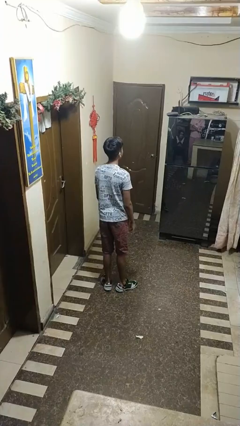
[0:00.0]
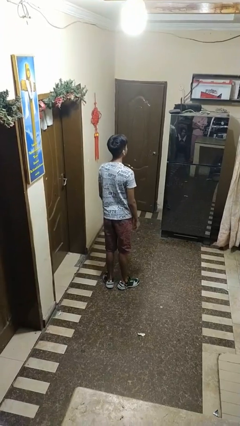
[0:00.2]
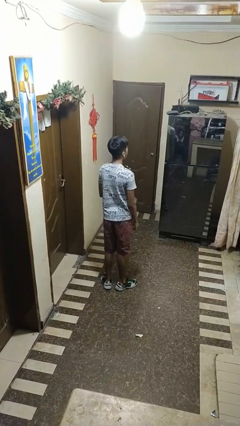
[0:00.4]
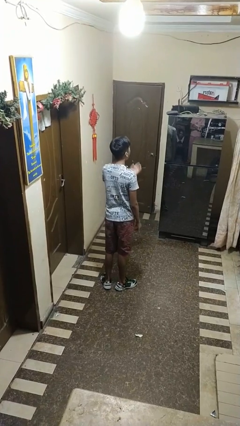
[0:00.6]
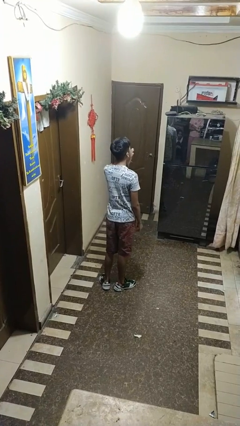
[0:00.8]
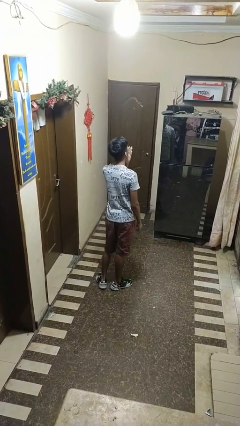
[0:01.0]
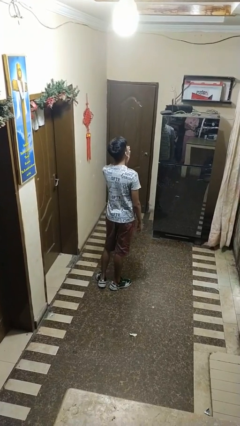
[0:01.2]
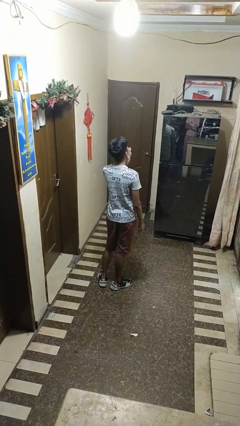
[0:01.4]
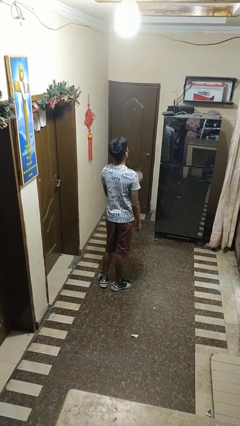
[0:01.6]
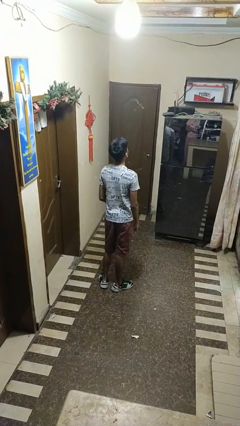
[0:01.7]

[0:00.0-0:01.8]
person yawns

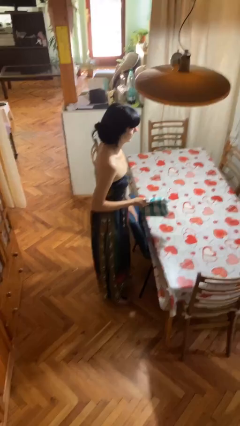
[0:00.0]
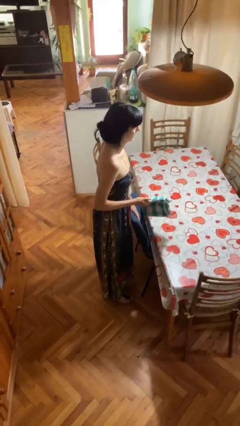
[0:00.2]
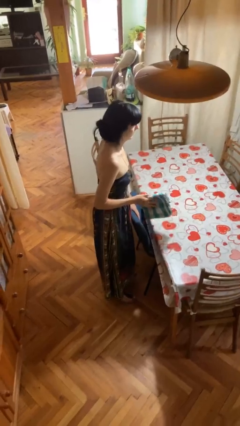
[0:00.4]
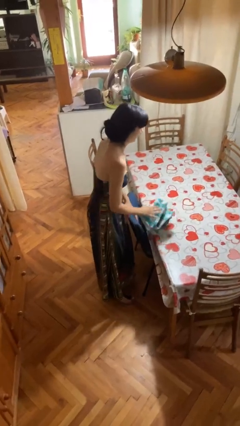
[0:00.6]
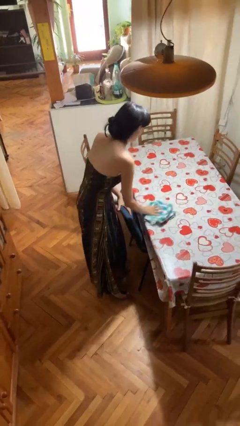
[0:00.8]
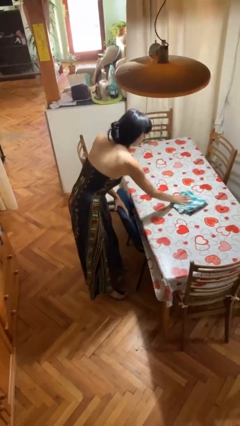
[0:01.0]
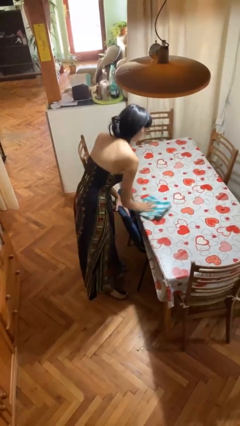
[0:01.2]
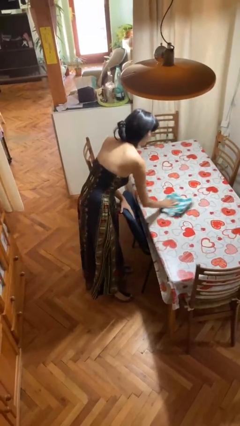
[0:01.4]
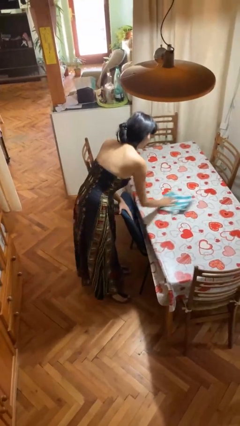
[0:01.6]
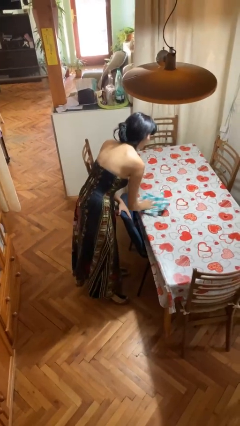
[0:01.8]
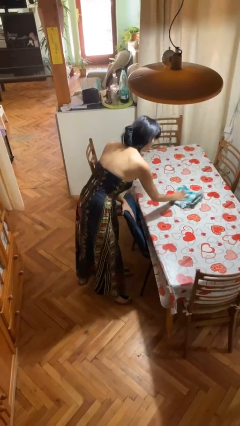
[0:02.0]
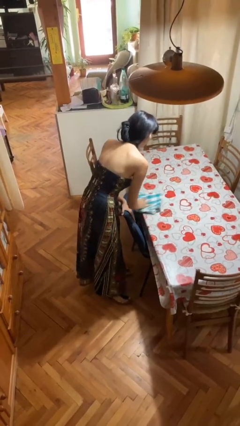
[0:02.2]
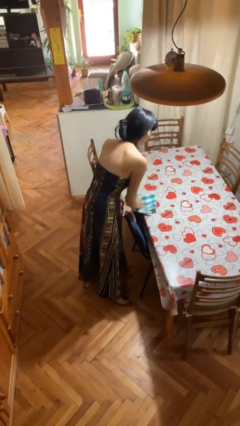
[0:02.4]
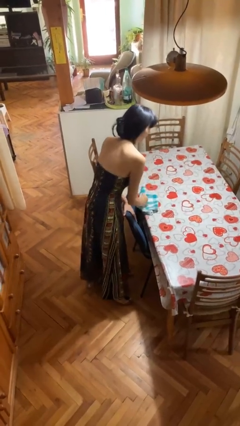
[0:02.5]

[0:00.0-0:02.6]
person cleans table with rag

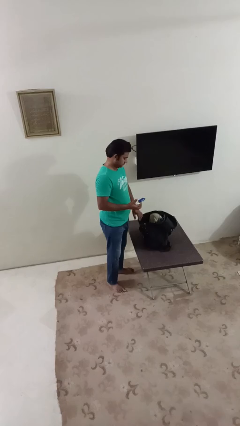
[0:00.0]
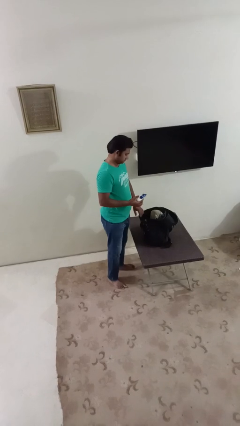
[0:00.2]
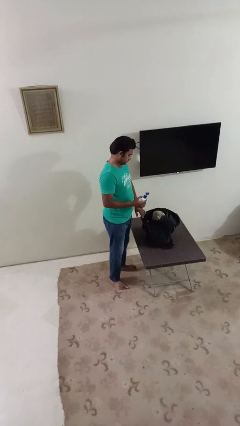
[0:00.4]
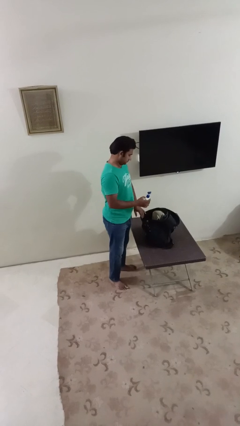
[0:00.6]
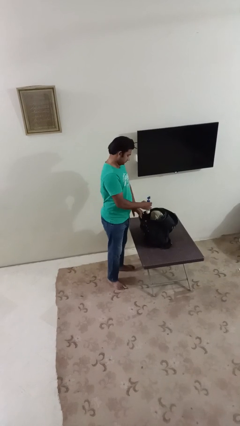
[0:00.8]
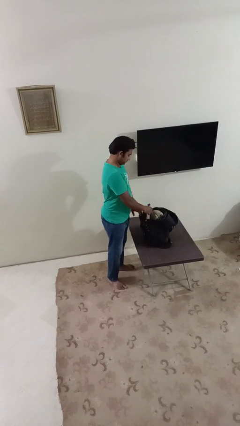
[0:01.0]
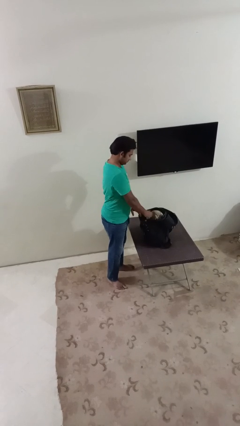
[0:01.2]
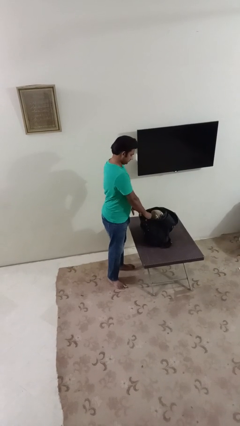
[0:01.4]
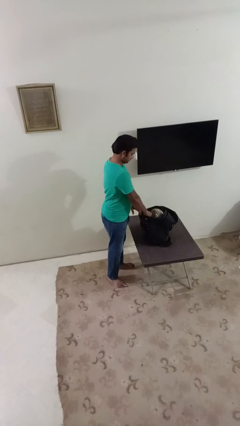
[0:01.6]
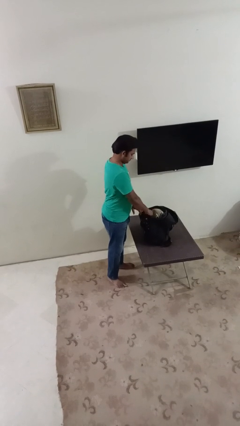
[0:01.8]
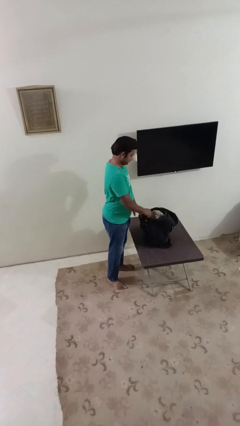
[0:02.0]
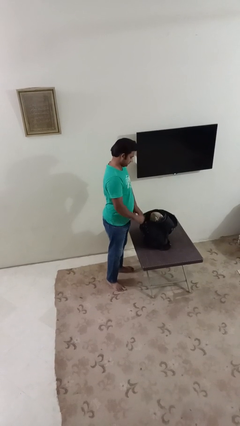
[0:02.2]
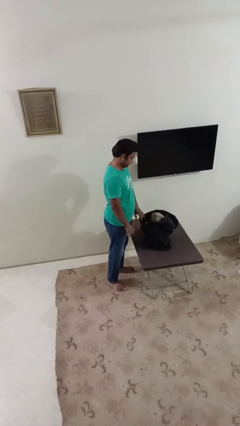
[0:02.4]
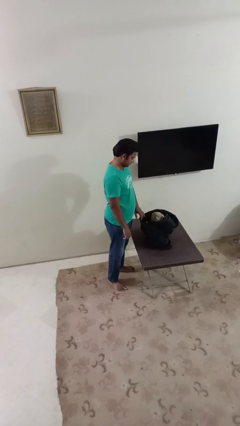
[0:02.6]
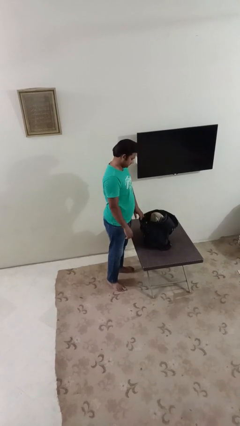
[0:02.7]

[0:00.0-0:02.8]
person puts object into backpack

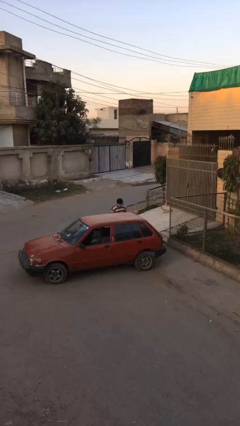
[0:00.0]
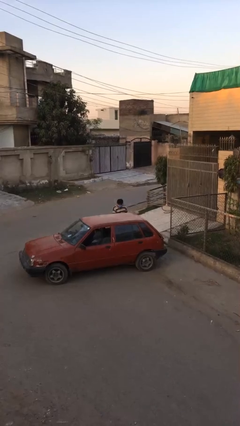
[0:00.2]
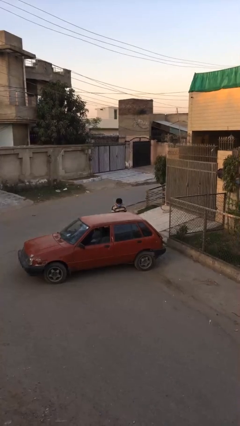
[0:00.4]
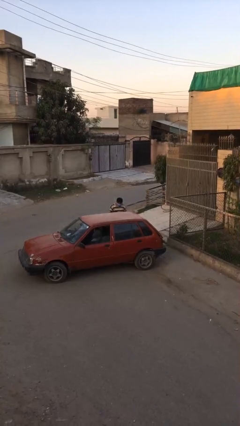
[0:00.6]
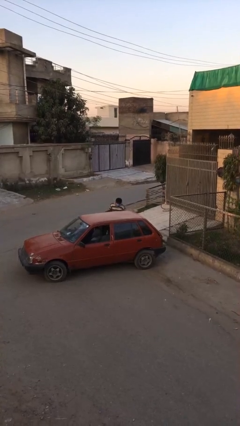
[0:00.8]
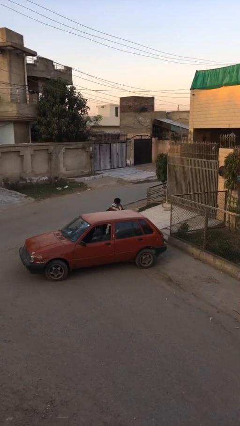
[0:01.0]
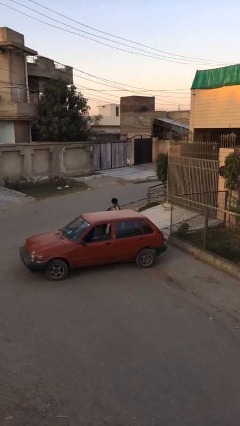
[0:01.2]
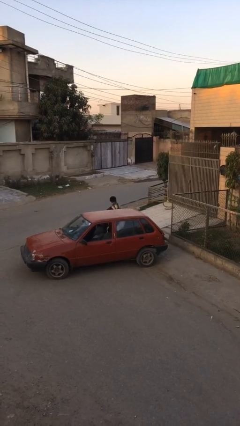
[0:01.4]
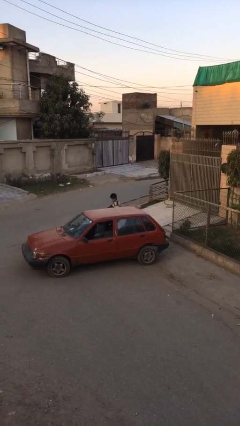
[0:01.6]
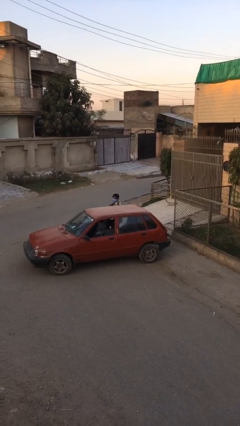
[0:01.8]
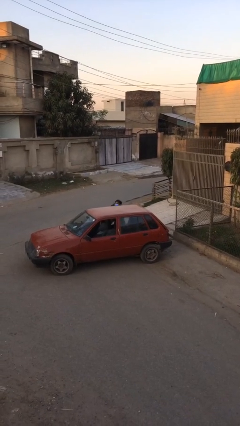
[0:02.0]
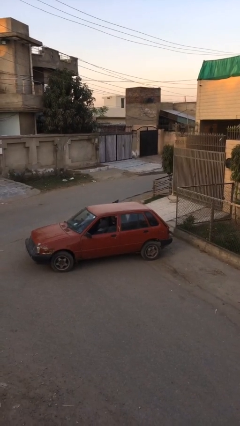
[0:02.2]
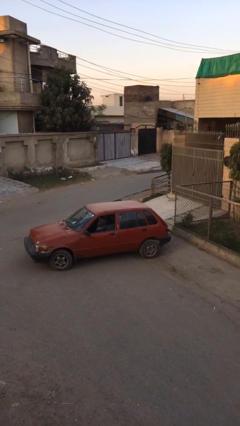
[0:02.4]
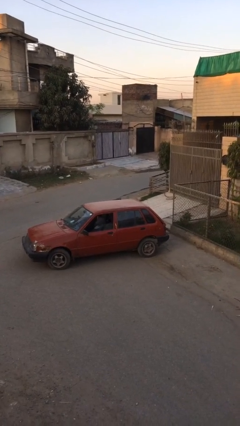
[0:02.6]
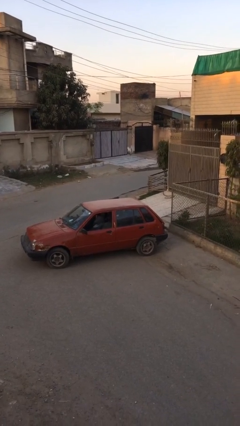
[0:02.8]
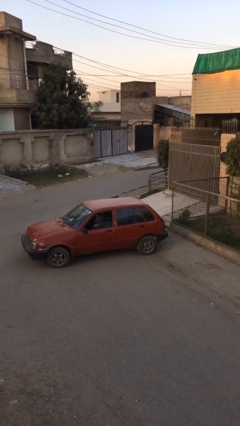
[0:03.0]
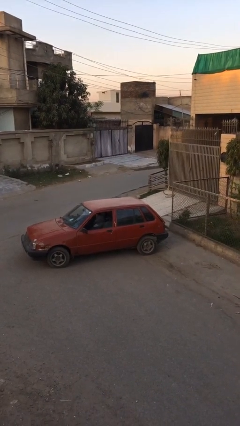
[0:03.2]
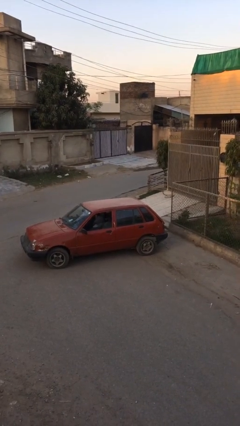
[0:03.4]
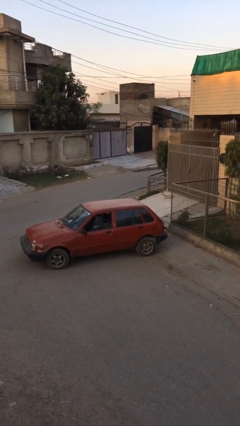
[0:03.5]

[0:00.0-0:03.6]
person enters car

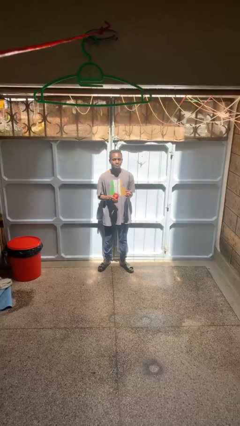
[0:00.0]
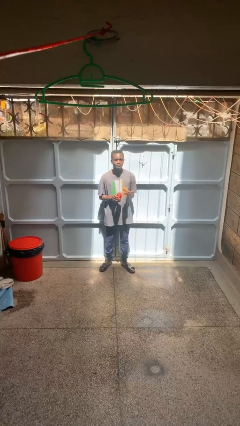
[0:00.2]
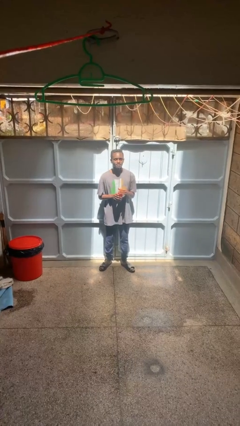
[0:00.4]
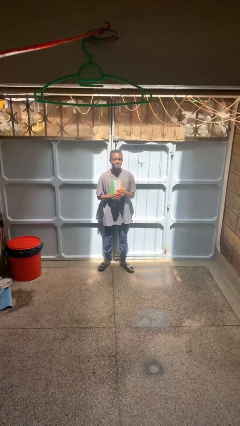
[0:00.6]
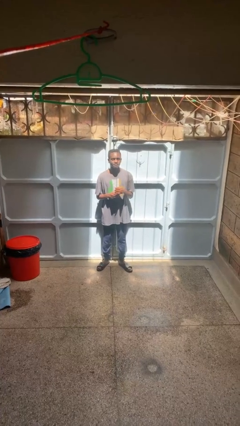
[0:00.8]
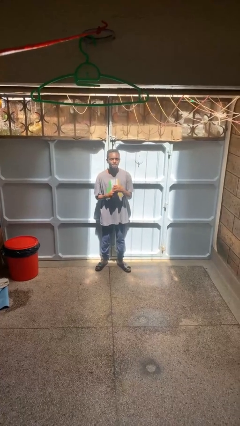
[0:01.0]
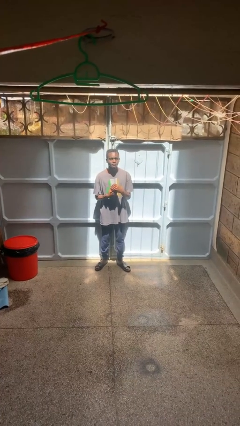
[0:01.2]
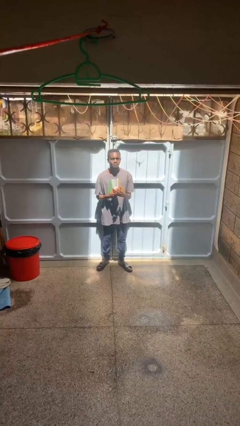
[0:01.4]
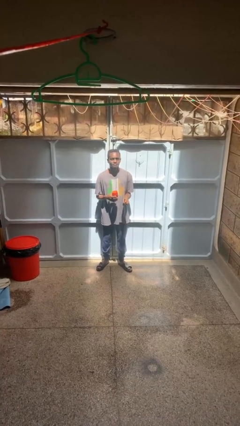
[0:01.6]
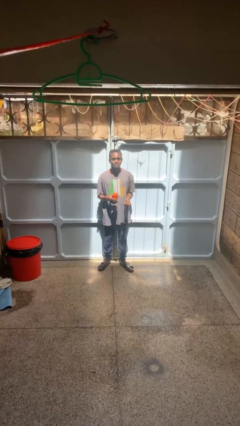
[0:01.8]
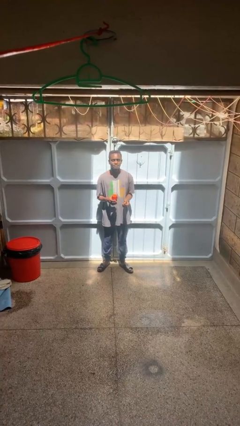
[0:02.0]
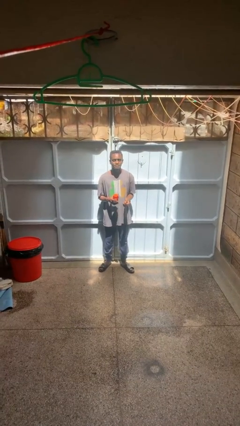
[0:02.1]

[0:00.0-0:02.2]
person closes jar

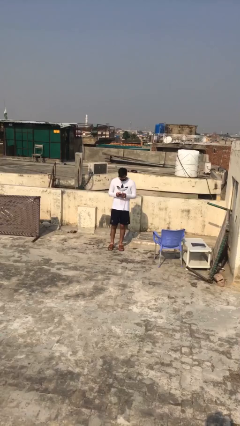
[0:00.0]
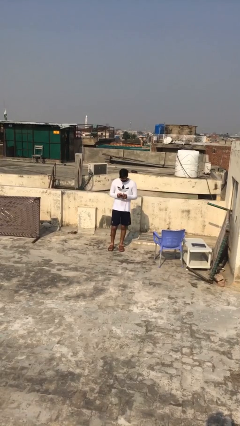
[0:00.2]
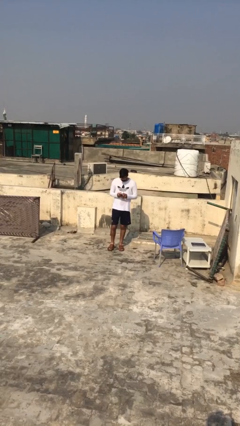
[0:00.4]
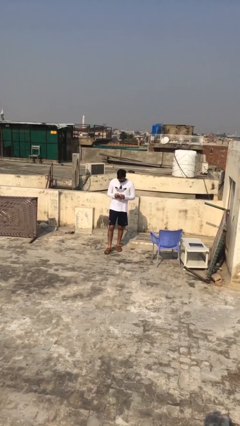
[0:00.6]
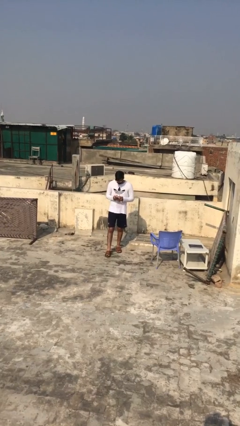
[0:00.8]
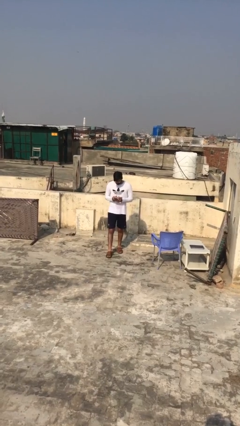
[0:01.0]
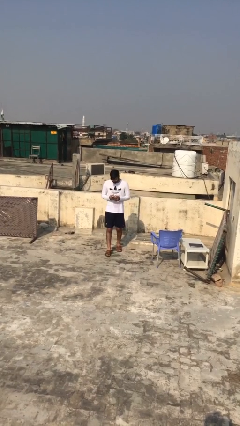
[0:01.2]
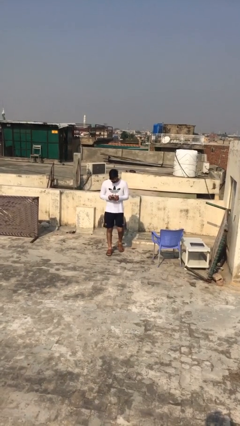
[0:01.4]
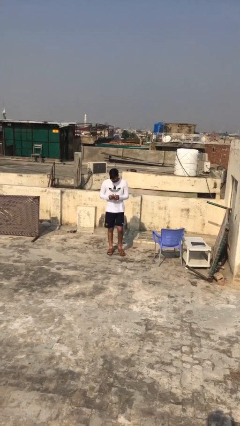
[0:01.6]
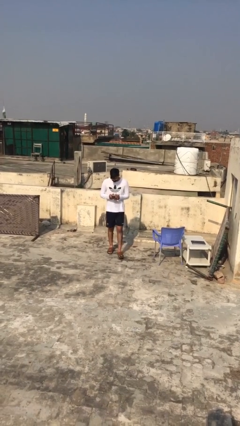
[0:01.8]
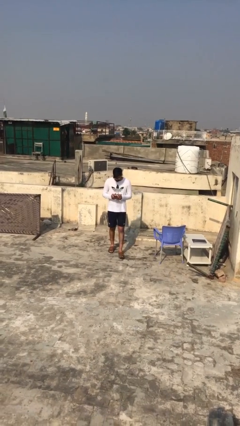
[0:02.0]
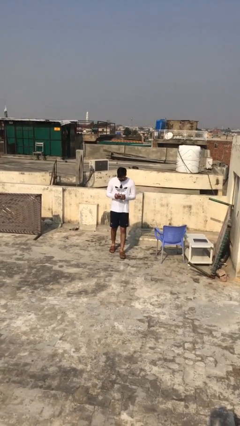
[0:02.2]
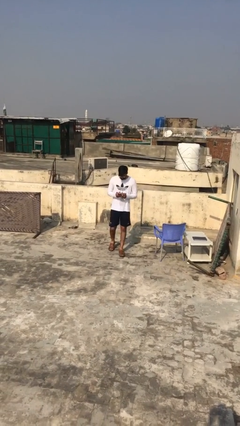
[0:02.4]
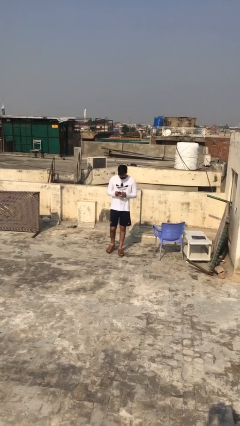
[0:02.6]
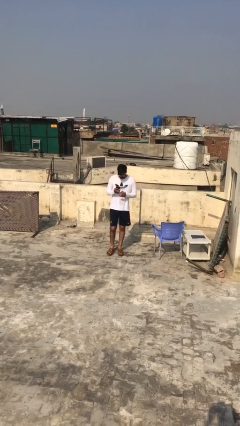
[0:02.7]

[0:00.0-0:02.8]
person texts on phone

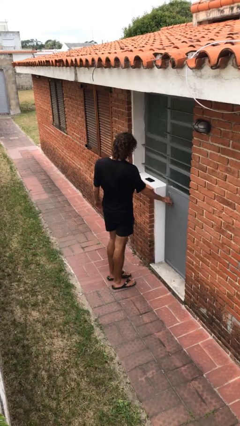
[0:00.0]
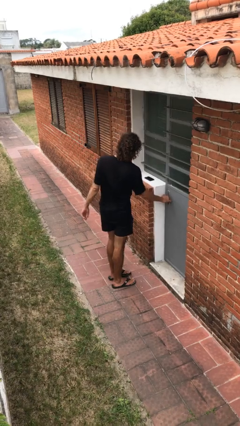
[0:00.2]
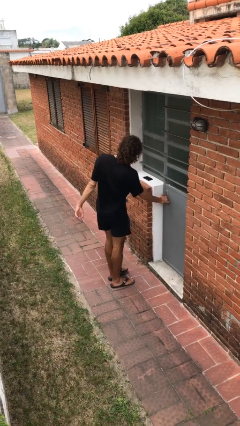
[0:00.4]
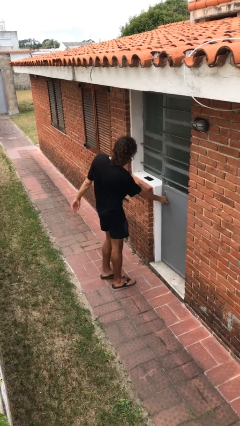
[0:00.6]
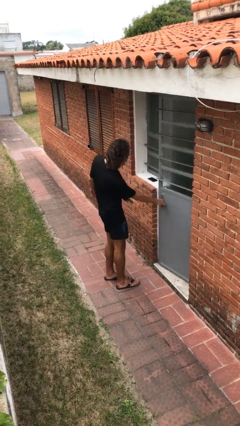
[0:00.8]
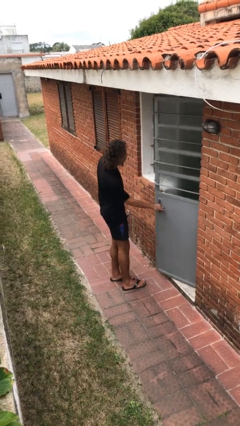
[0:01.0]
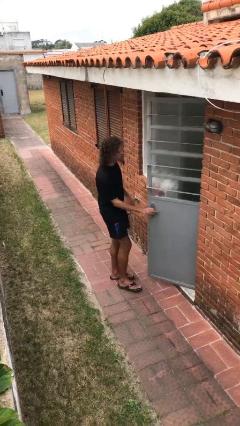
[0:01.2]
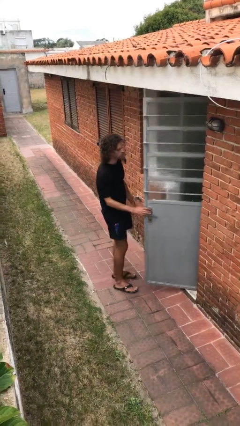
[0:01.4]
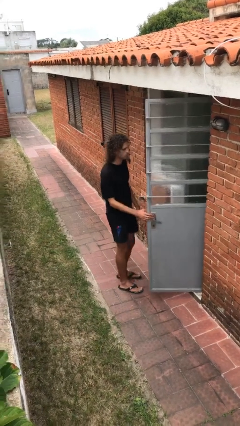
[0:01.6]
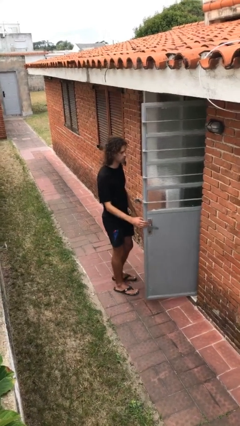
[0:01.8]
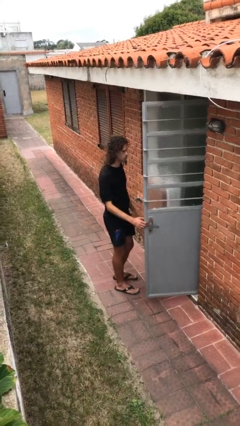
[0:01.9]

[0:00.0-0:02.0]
person opens facility door
